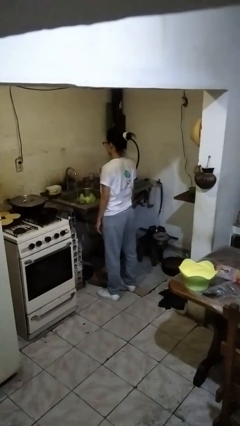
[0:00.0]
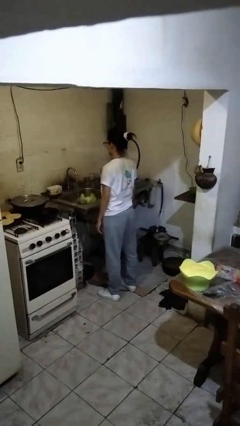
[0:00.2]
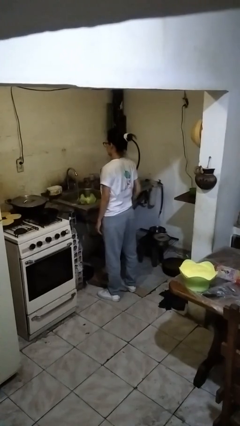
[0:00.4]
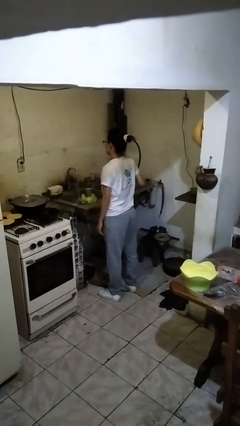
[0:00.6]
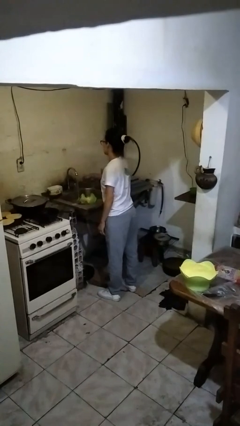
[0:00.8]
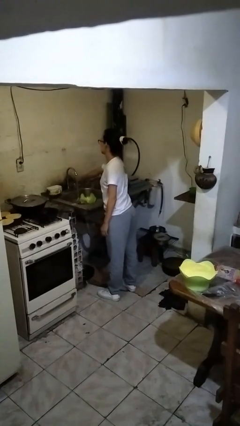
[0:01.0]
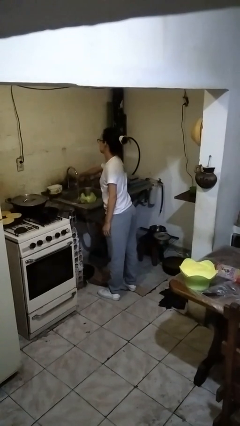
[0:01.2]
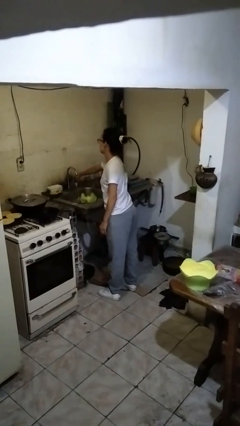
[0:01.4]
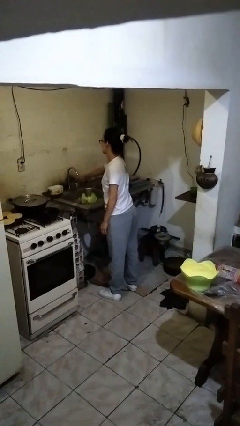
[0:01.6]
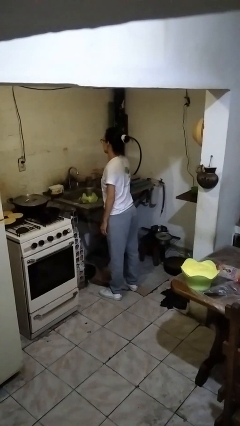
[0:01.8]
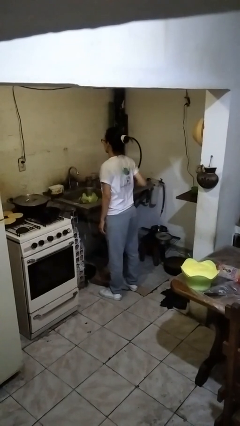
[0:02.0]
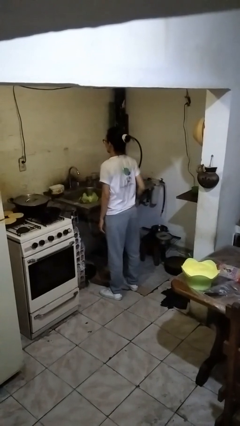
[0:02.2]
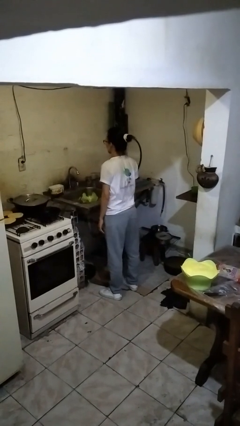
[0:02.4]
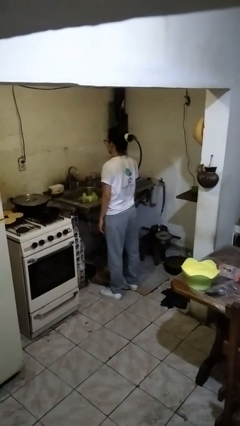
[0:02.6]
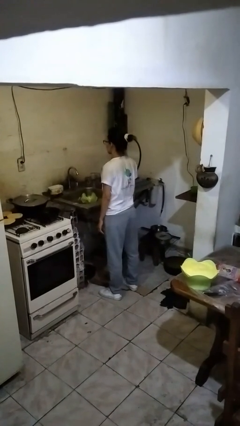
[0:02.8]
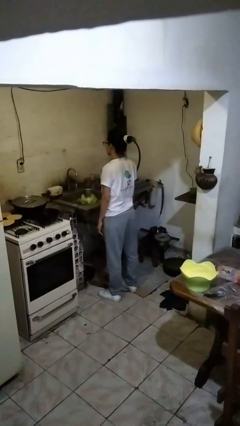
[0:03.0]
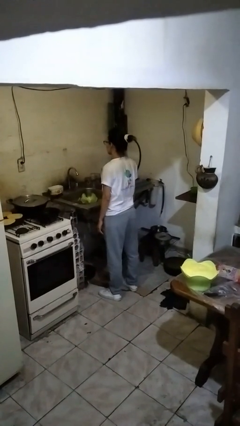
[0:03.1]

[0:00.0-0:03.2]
person turns off faucet

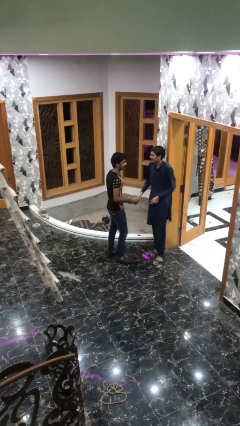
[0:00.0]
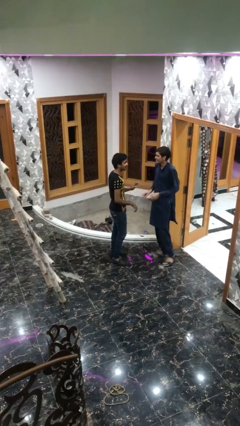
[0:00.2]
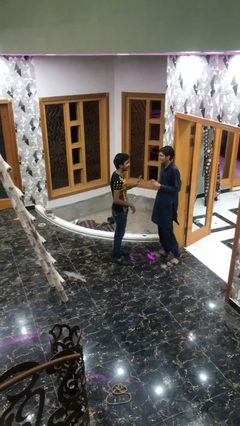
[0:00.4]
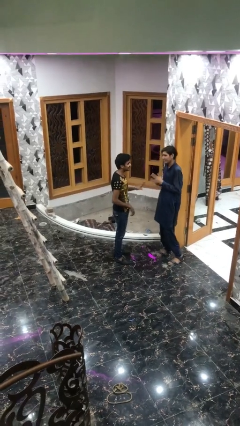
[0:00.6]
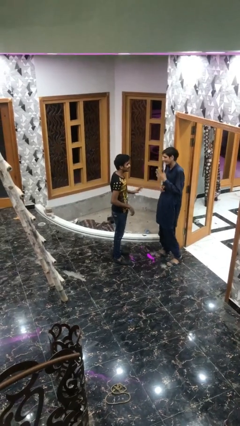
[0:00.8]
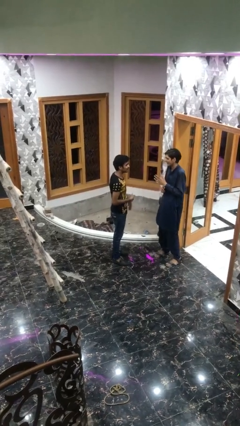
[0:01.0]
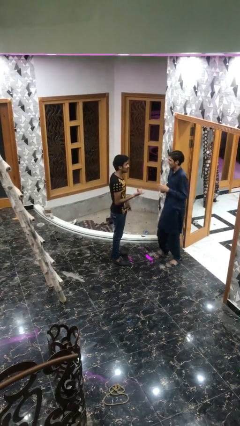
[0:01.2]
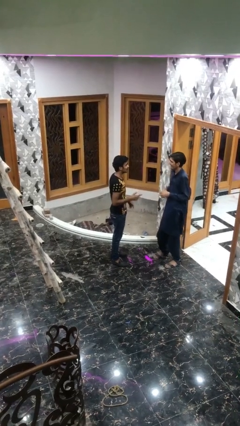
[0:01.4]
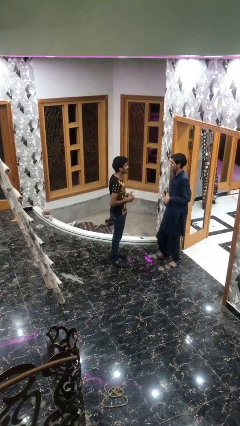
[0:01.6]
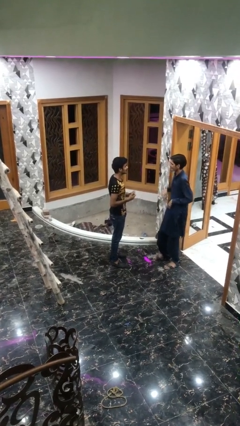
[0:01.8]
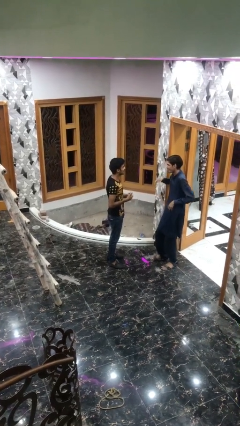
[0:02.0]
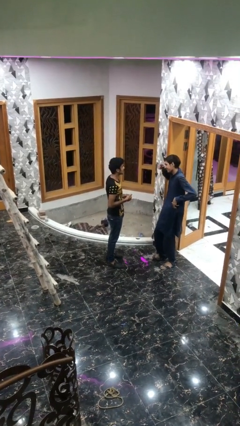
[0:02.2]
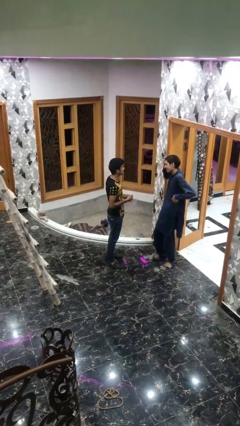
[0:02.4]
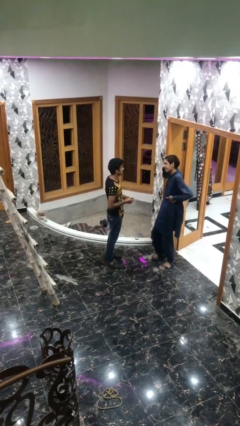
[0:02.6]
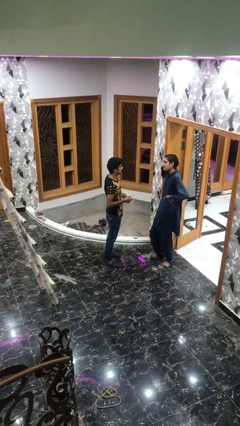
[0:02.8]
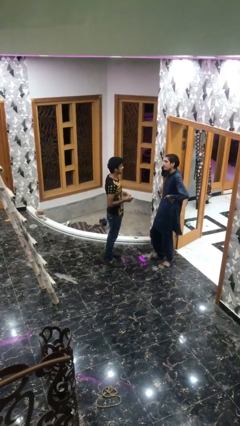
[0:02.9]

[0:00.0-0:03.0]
person talks to person

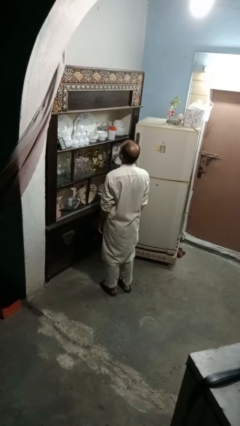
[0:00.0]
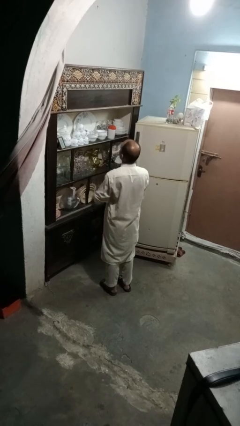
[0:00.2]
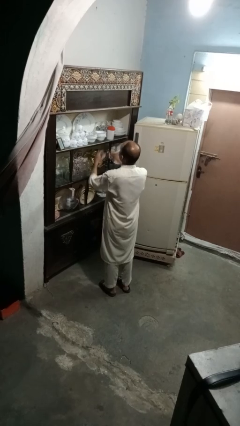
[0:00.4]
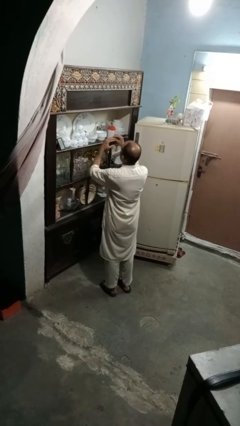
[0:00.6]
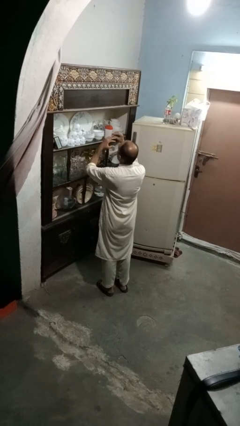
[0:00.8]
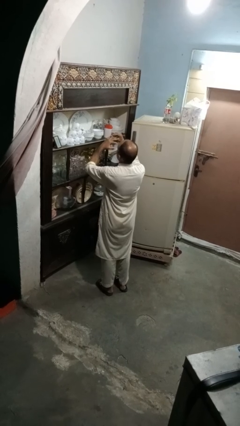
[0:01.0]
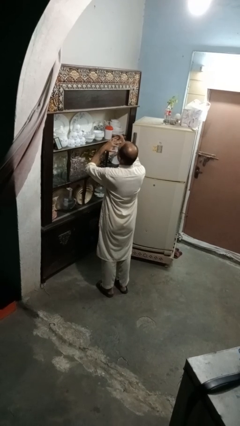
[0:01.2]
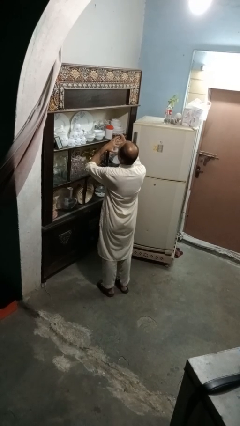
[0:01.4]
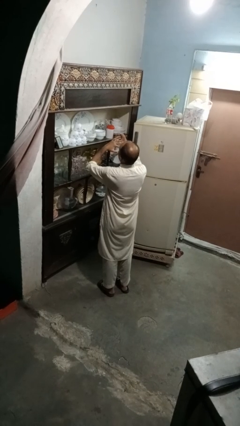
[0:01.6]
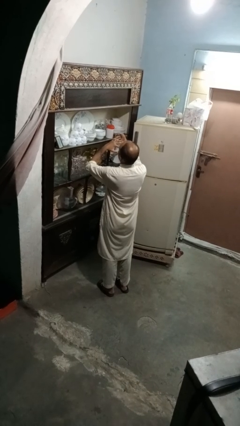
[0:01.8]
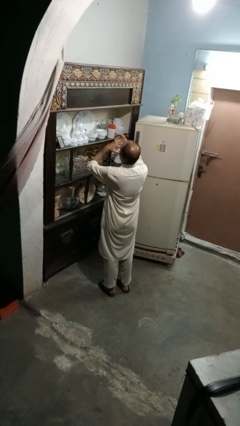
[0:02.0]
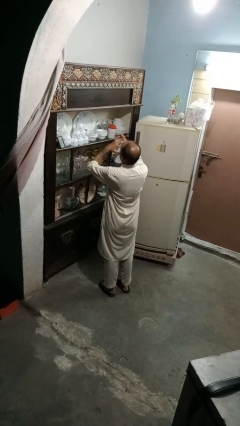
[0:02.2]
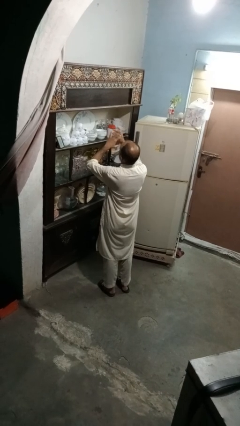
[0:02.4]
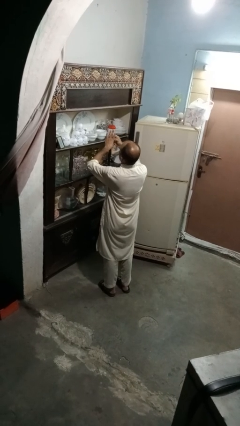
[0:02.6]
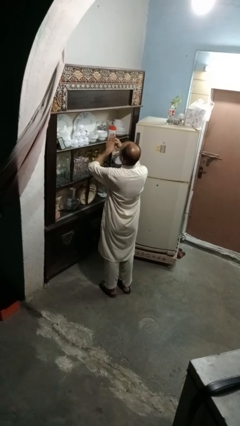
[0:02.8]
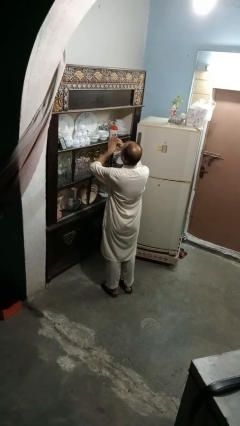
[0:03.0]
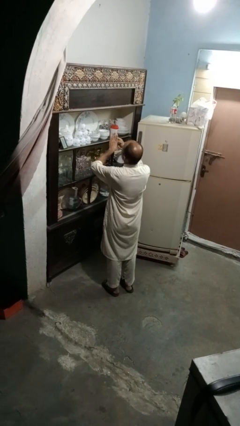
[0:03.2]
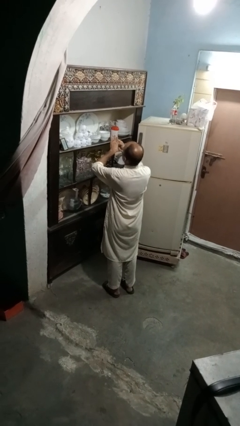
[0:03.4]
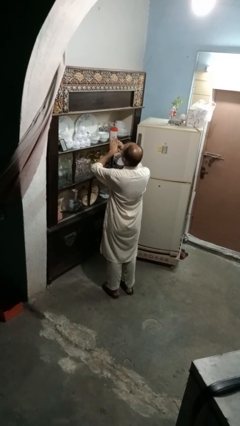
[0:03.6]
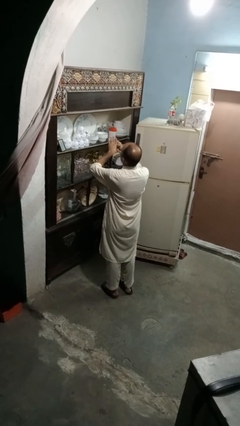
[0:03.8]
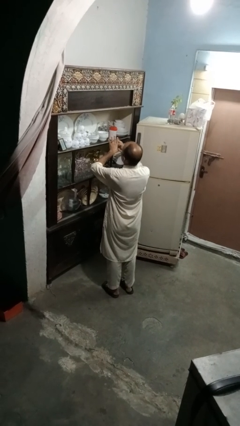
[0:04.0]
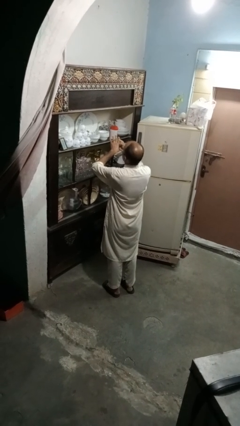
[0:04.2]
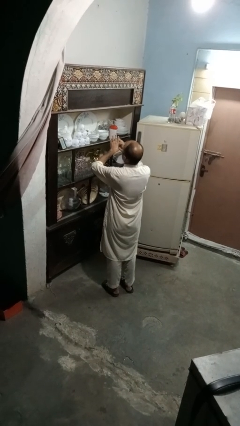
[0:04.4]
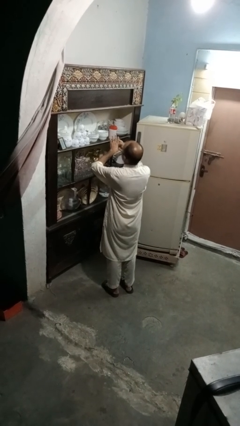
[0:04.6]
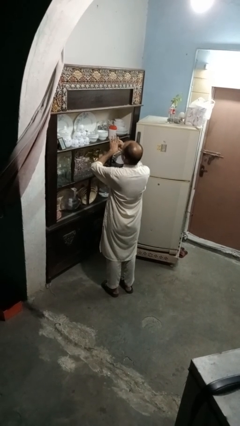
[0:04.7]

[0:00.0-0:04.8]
person puts on ring

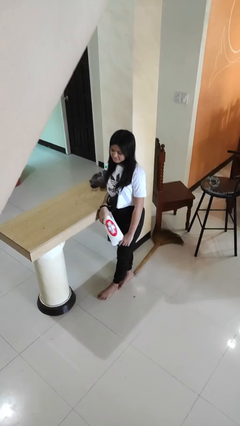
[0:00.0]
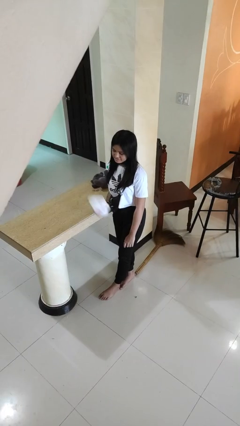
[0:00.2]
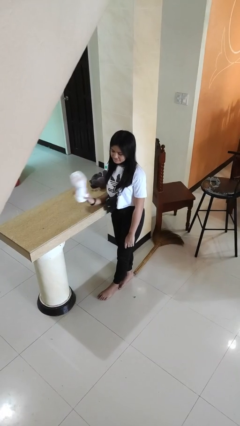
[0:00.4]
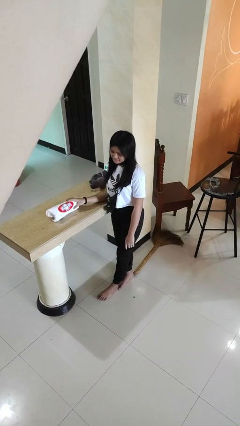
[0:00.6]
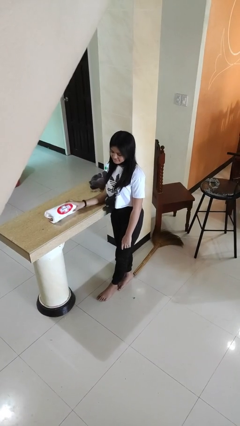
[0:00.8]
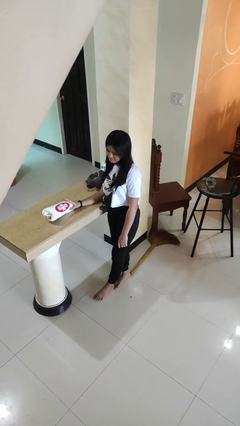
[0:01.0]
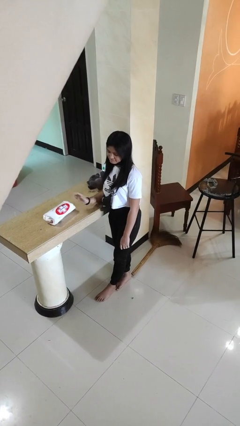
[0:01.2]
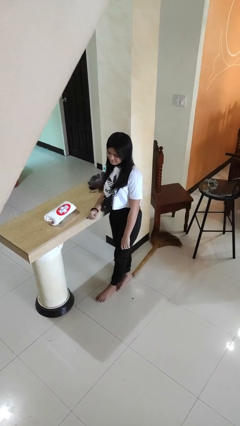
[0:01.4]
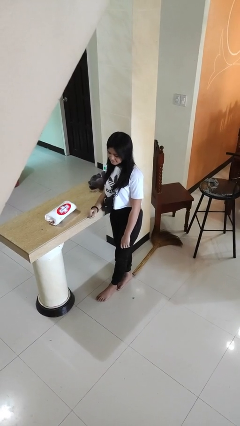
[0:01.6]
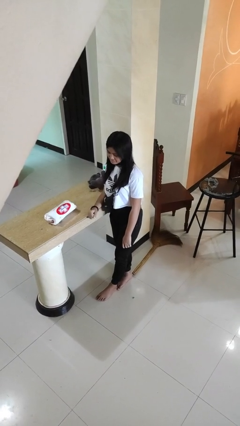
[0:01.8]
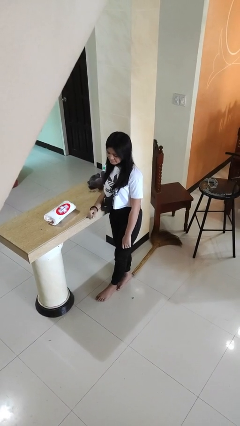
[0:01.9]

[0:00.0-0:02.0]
person puts down object on countertop

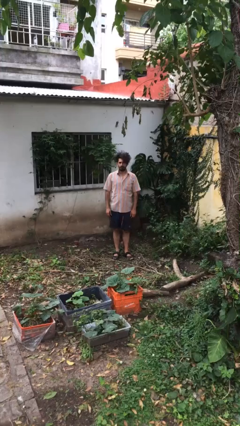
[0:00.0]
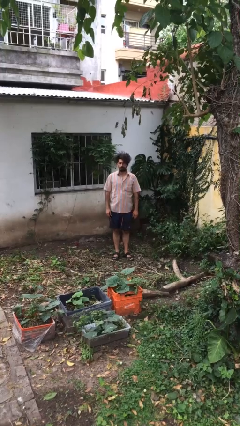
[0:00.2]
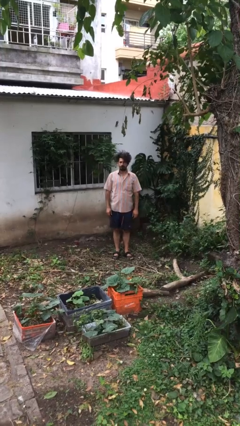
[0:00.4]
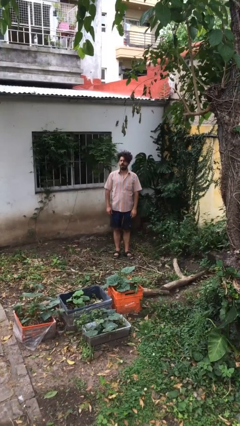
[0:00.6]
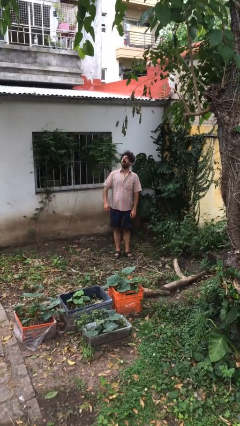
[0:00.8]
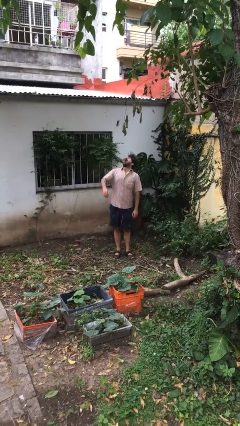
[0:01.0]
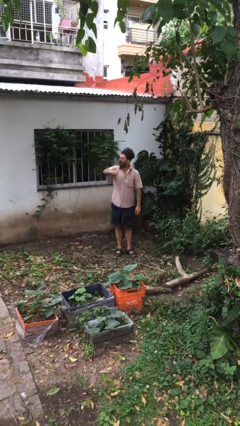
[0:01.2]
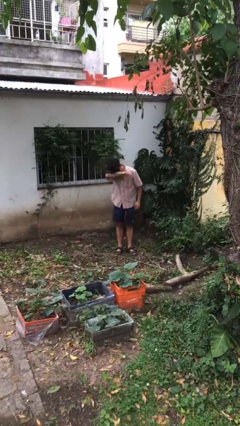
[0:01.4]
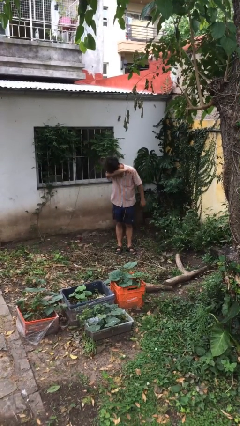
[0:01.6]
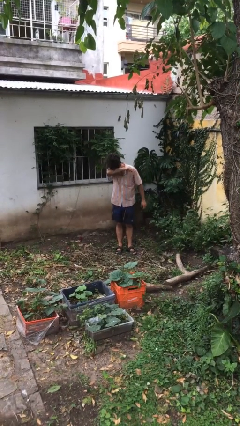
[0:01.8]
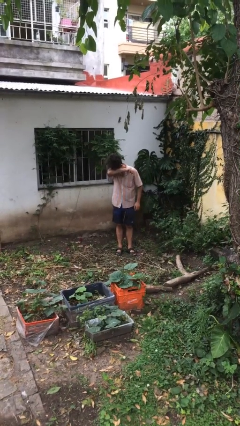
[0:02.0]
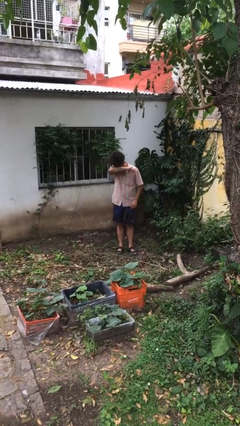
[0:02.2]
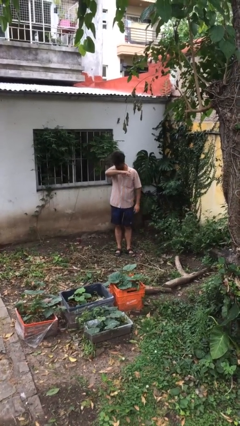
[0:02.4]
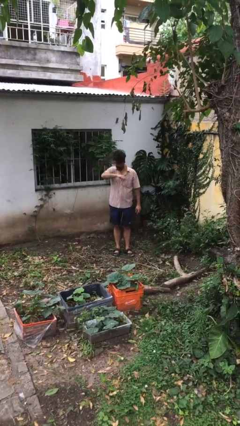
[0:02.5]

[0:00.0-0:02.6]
person sneezes into arm

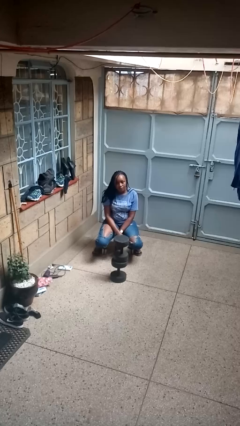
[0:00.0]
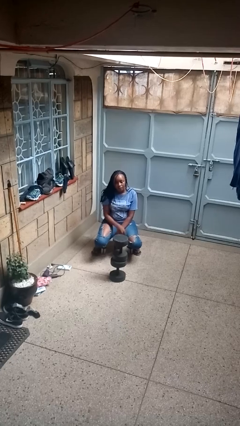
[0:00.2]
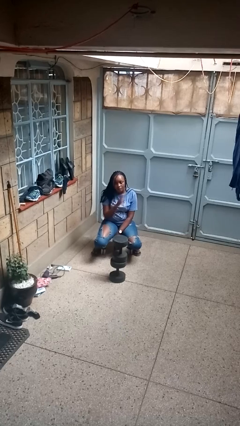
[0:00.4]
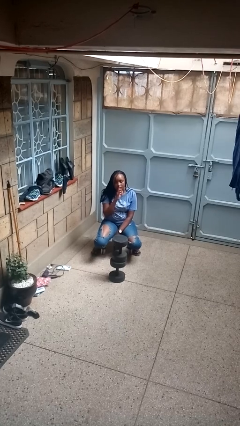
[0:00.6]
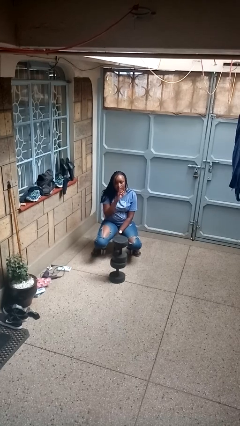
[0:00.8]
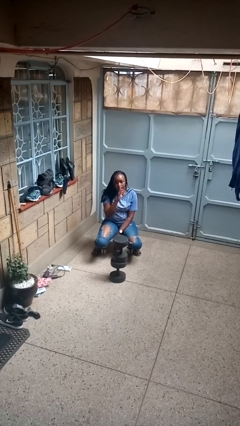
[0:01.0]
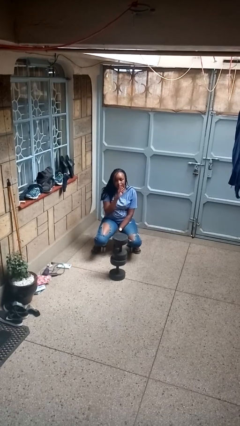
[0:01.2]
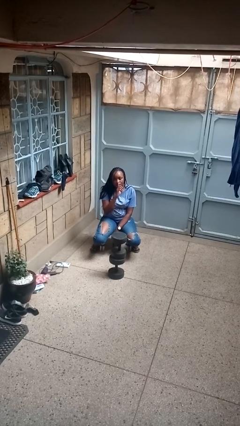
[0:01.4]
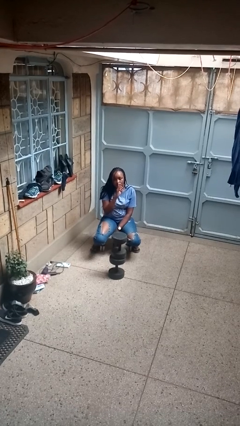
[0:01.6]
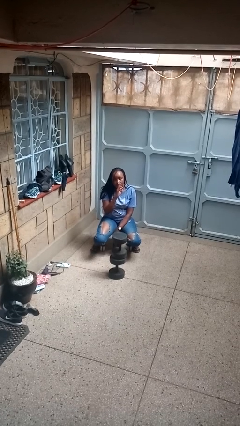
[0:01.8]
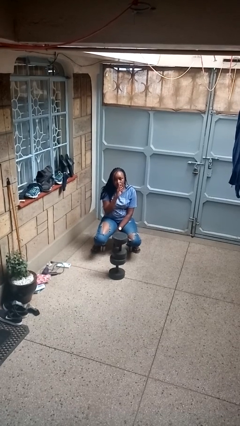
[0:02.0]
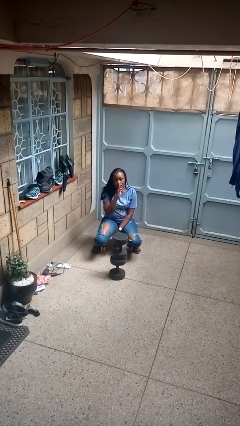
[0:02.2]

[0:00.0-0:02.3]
person gestures be quiet
